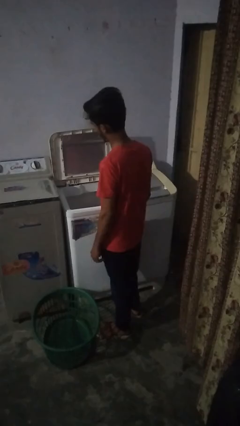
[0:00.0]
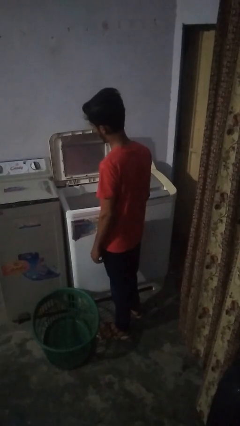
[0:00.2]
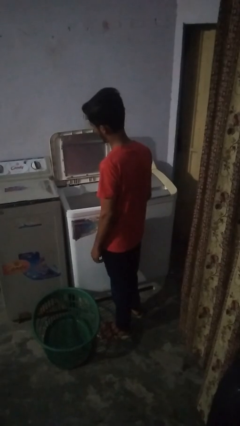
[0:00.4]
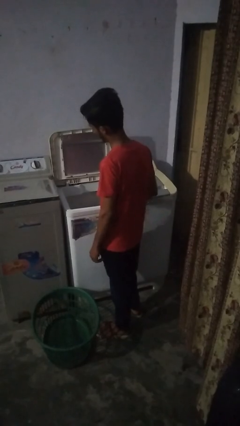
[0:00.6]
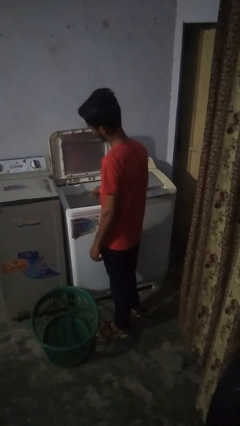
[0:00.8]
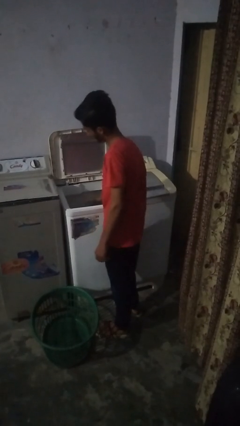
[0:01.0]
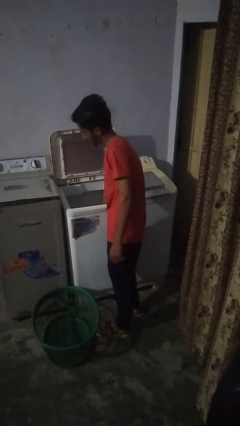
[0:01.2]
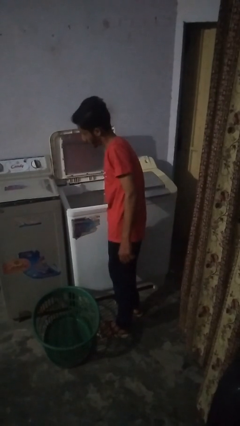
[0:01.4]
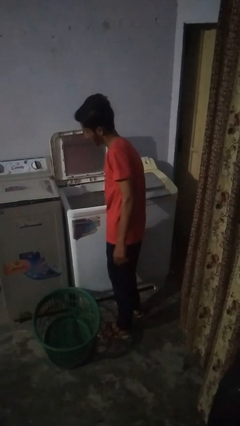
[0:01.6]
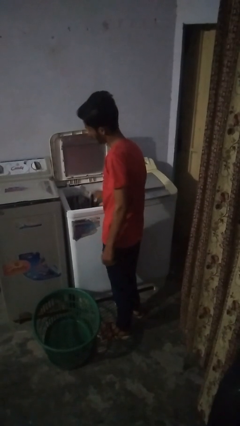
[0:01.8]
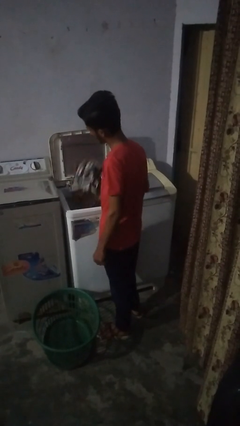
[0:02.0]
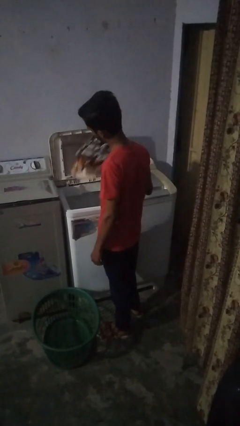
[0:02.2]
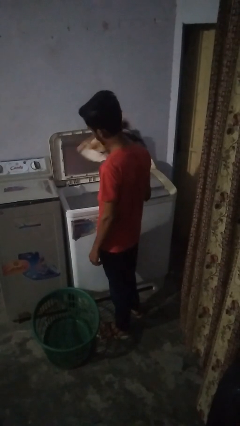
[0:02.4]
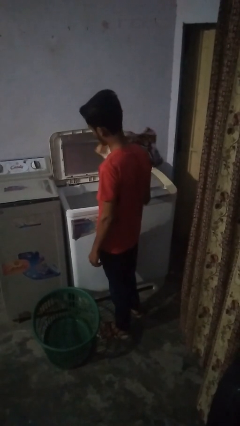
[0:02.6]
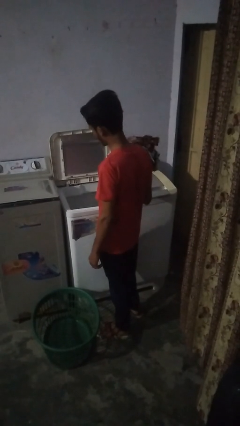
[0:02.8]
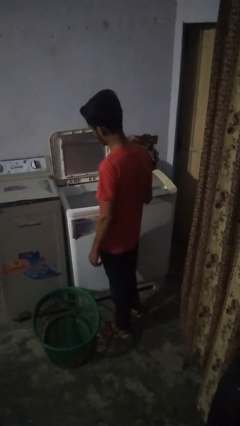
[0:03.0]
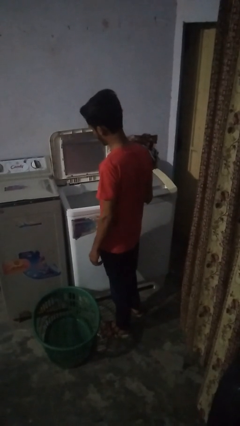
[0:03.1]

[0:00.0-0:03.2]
person unloads clotheswasher

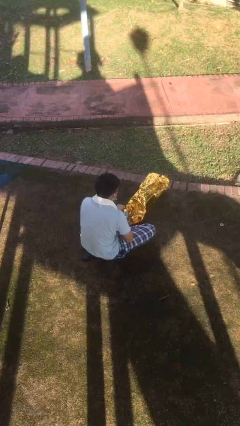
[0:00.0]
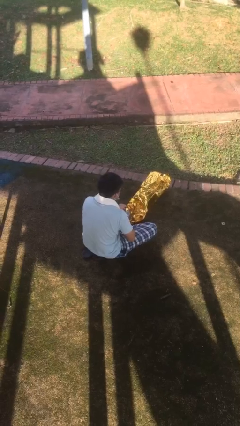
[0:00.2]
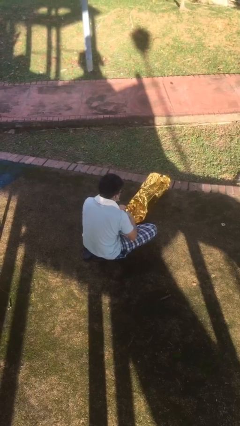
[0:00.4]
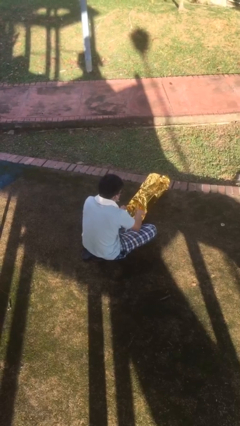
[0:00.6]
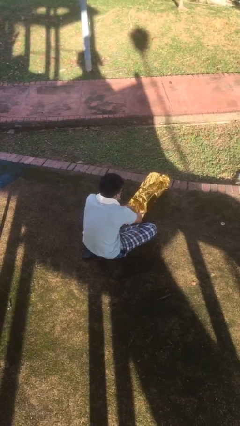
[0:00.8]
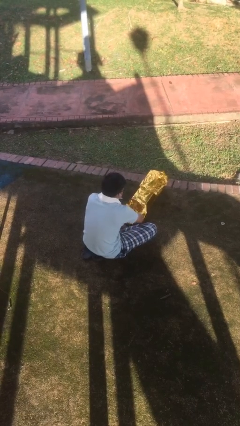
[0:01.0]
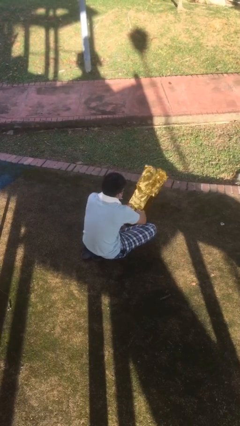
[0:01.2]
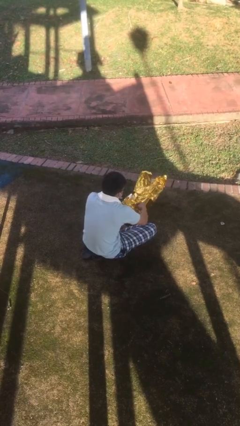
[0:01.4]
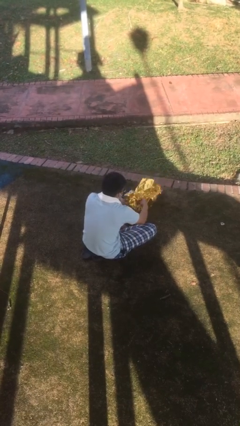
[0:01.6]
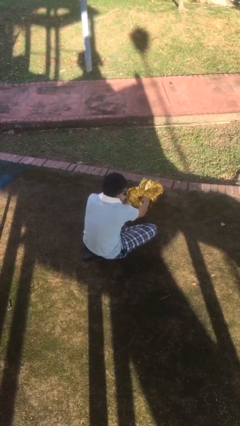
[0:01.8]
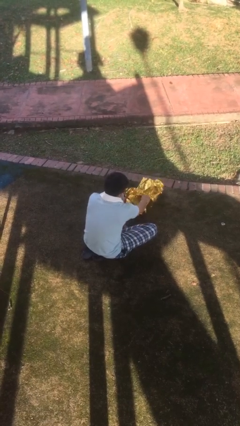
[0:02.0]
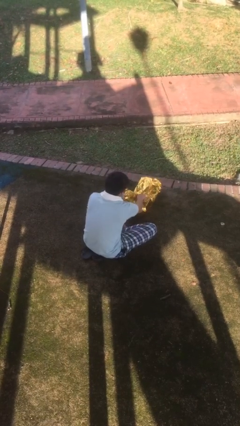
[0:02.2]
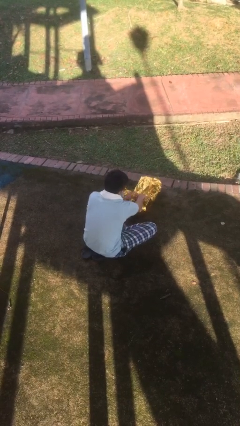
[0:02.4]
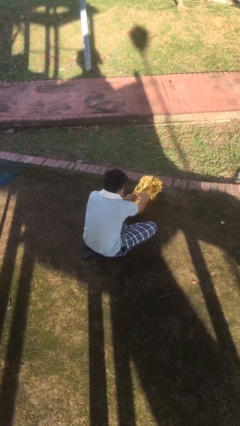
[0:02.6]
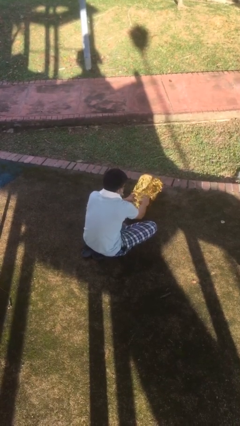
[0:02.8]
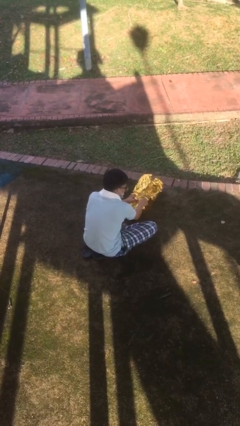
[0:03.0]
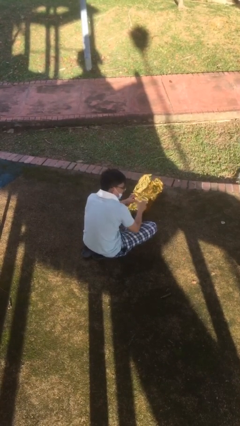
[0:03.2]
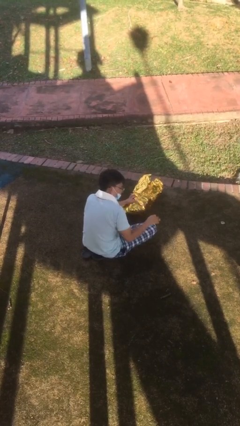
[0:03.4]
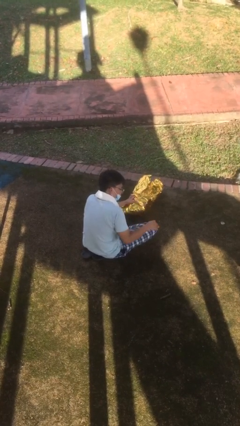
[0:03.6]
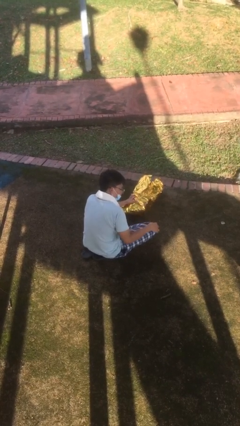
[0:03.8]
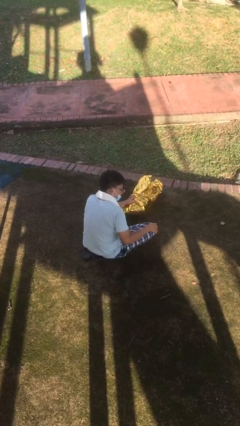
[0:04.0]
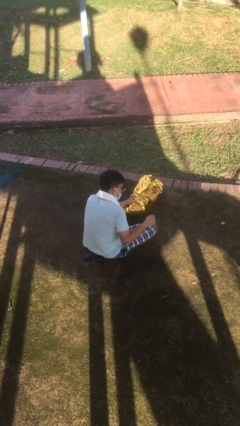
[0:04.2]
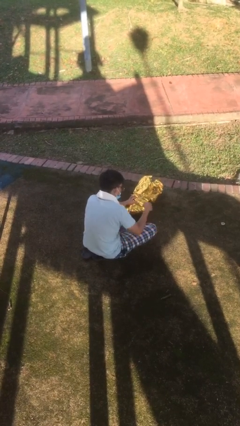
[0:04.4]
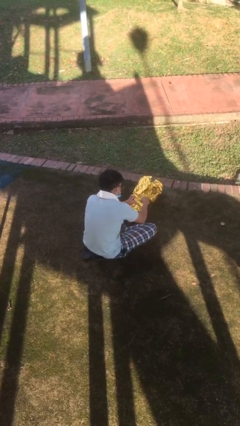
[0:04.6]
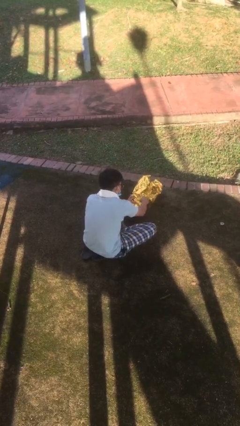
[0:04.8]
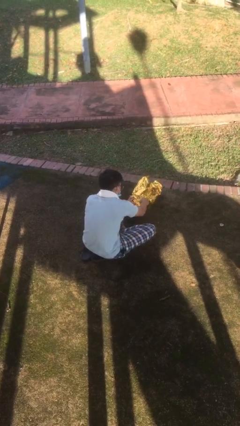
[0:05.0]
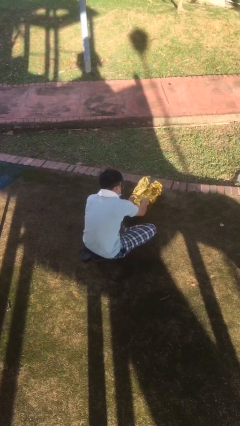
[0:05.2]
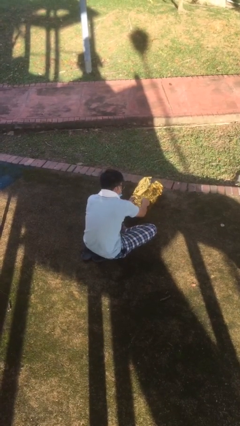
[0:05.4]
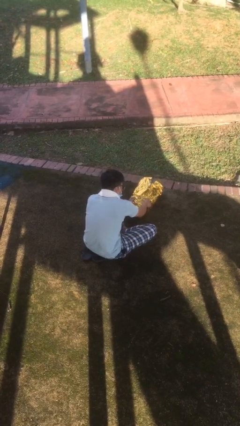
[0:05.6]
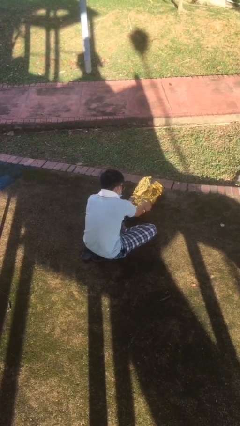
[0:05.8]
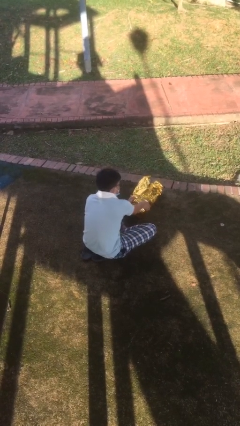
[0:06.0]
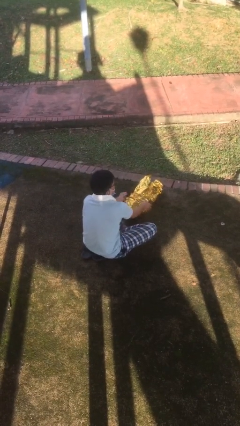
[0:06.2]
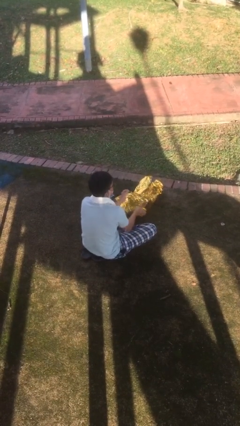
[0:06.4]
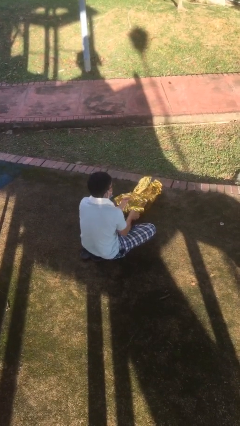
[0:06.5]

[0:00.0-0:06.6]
person wraps box

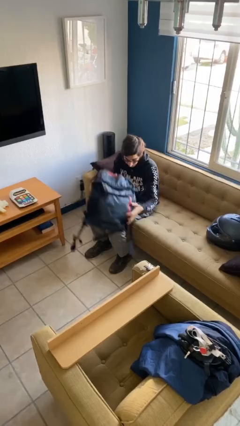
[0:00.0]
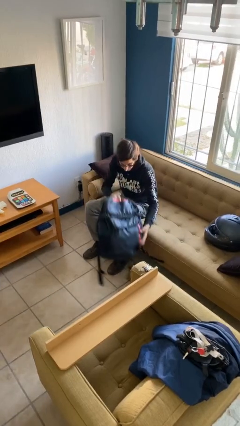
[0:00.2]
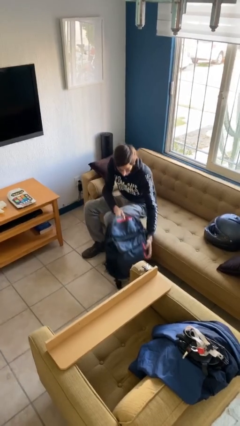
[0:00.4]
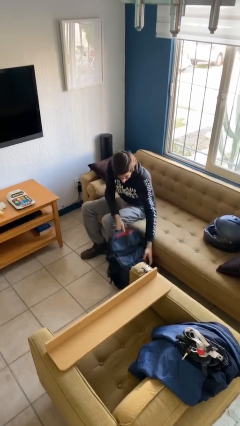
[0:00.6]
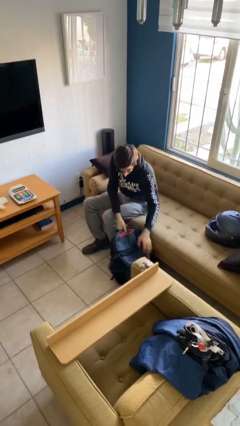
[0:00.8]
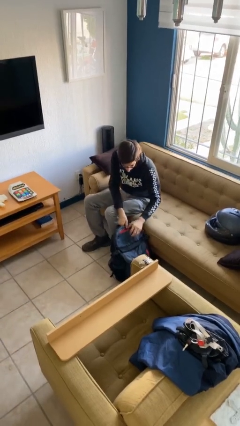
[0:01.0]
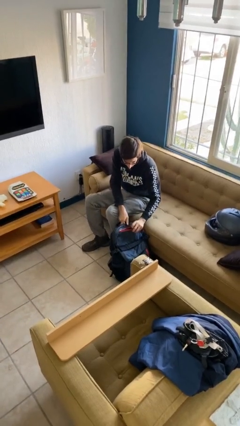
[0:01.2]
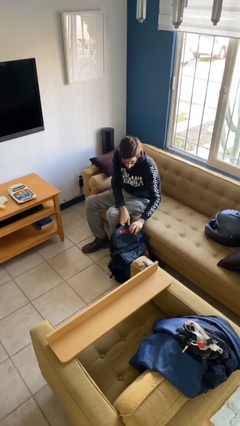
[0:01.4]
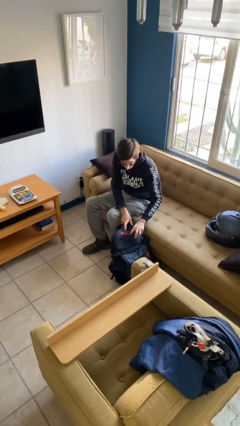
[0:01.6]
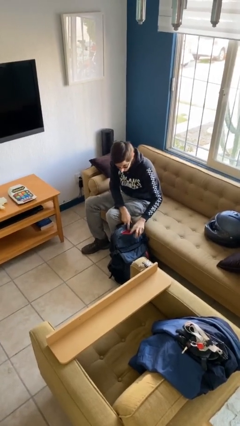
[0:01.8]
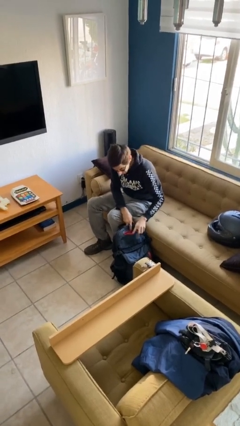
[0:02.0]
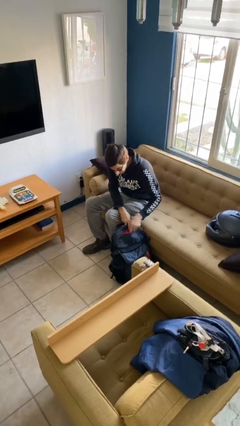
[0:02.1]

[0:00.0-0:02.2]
person puts down object on floor

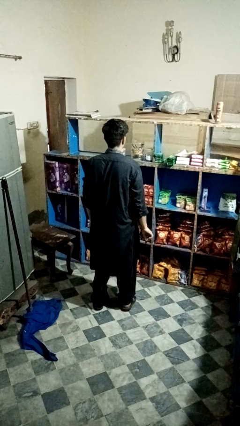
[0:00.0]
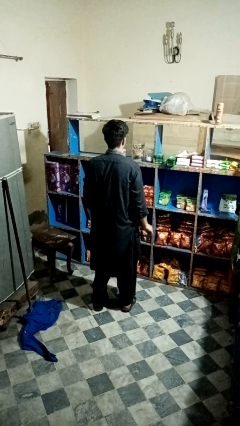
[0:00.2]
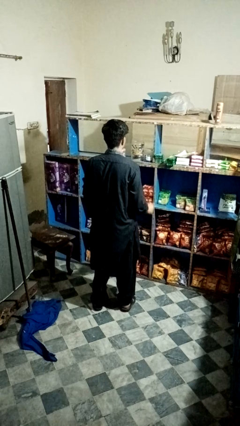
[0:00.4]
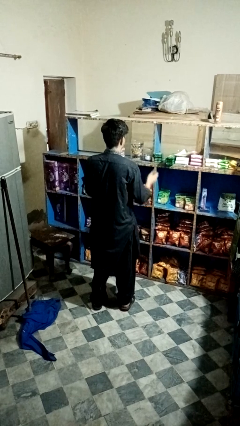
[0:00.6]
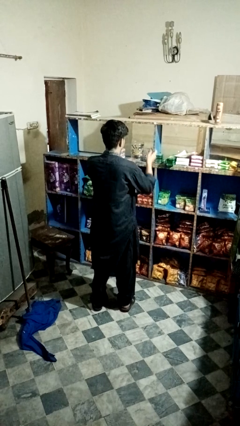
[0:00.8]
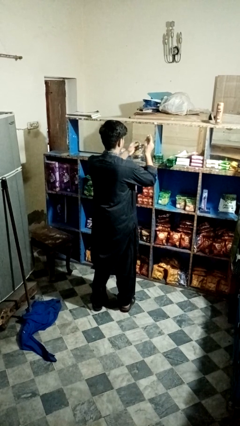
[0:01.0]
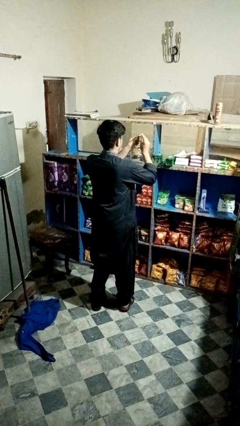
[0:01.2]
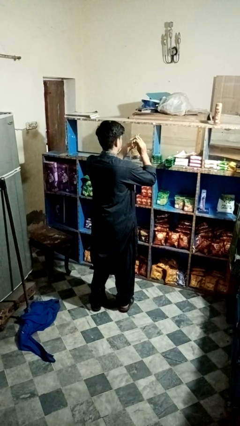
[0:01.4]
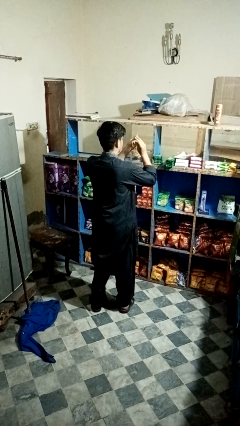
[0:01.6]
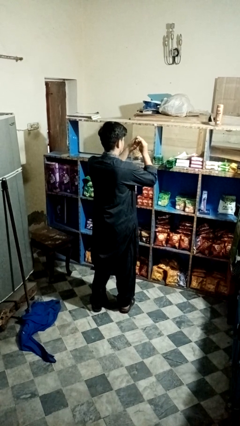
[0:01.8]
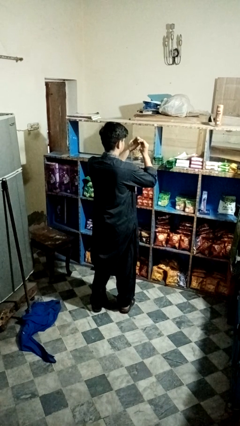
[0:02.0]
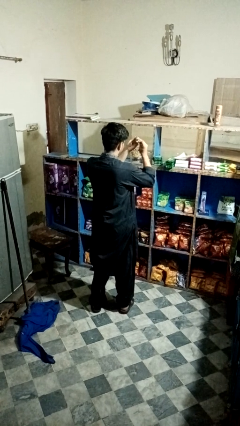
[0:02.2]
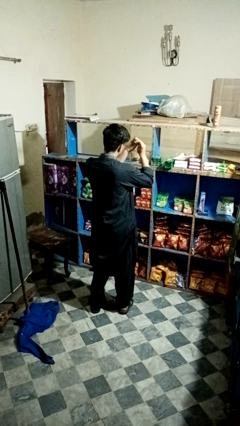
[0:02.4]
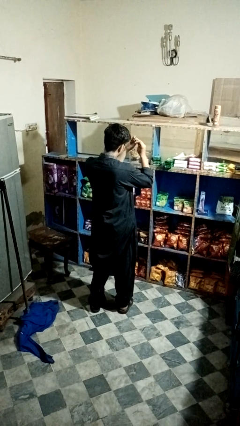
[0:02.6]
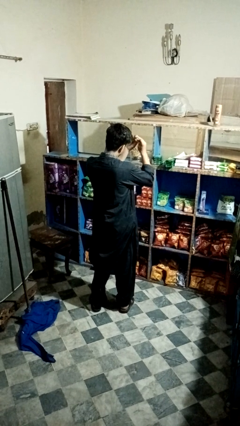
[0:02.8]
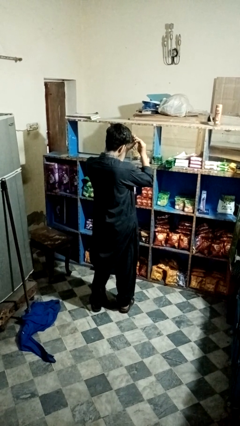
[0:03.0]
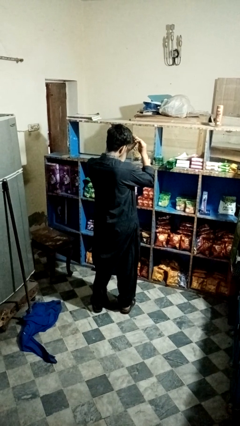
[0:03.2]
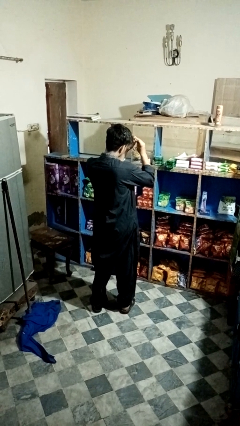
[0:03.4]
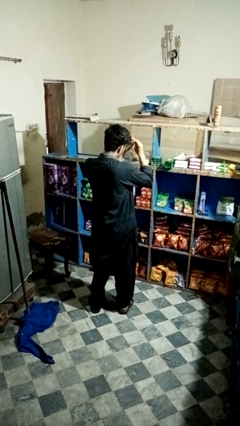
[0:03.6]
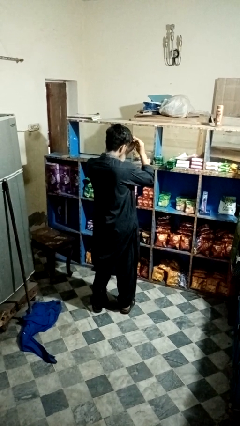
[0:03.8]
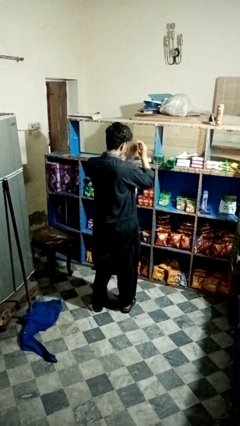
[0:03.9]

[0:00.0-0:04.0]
person files fingernails

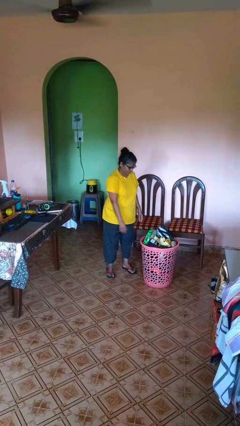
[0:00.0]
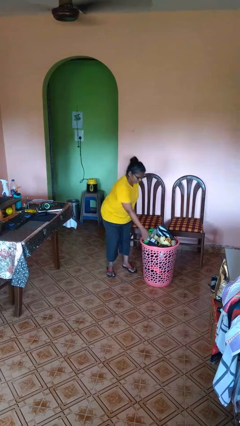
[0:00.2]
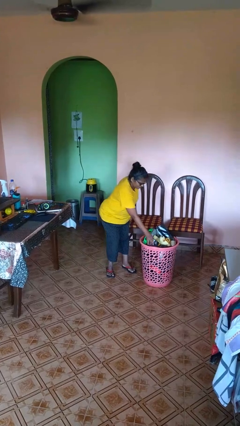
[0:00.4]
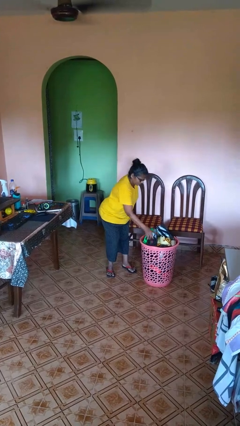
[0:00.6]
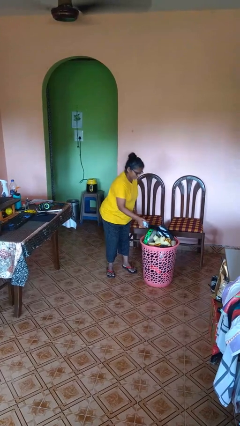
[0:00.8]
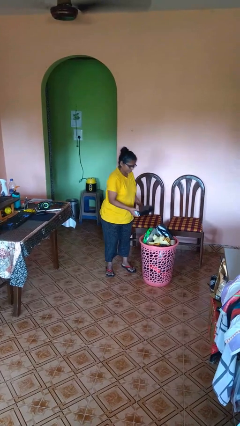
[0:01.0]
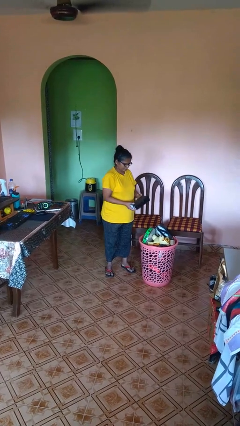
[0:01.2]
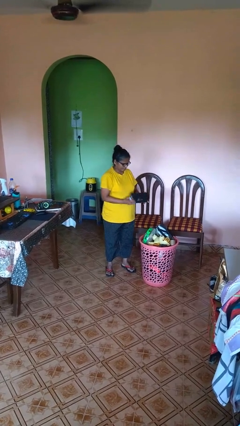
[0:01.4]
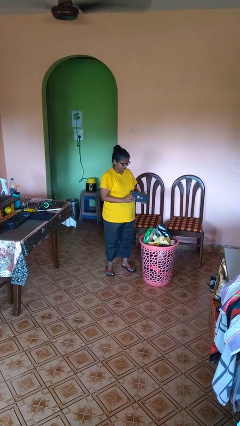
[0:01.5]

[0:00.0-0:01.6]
person takes object from basket
